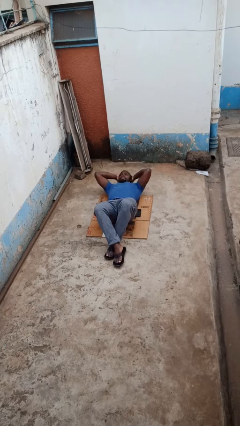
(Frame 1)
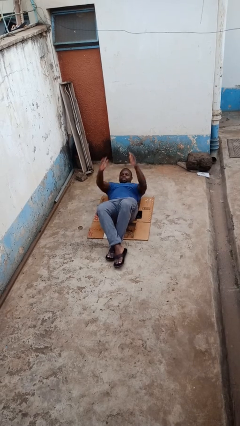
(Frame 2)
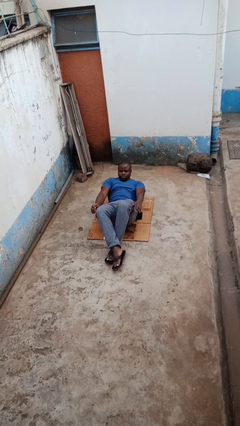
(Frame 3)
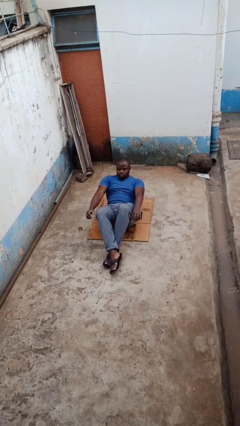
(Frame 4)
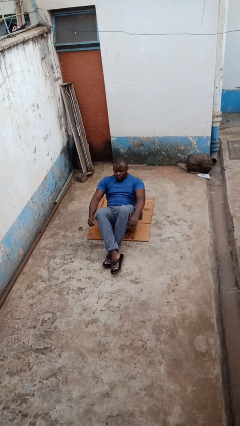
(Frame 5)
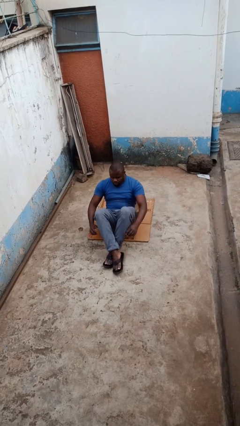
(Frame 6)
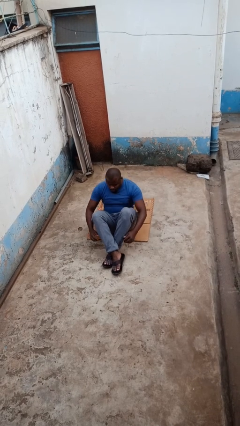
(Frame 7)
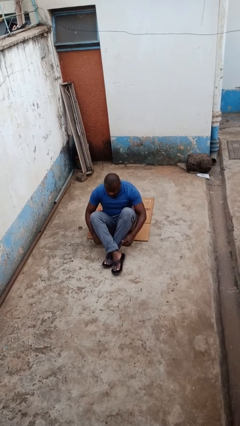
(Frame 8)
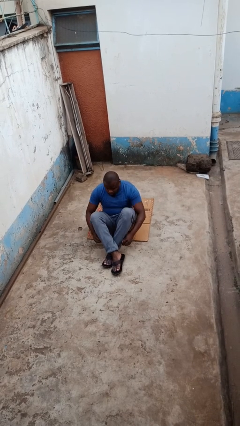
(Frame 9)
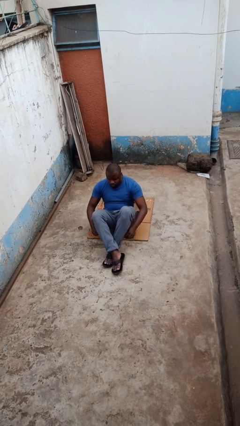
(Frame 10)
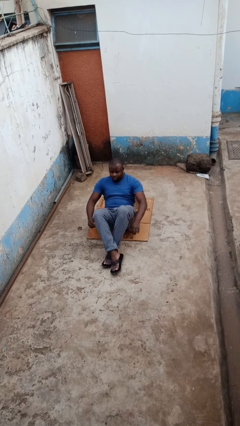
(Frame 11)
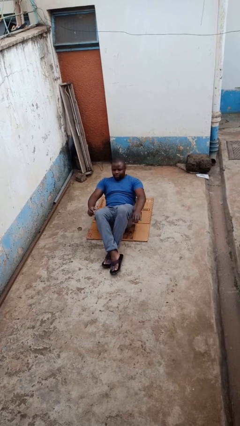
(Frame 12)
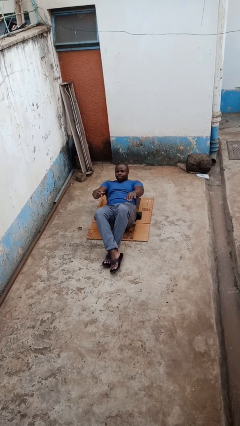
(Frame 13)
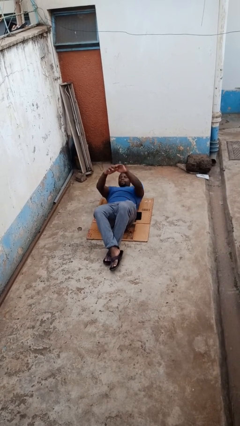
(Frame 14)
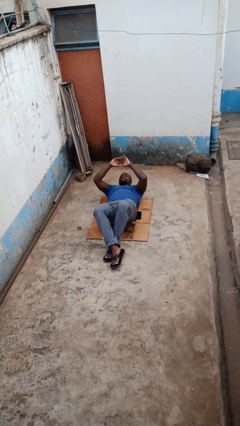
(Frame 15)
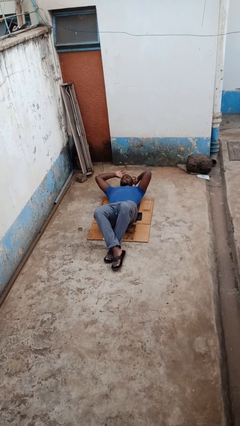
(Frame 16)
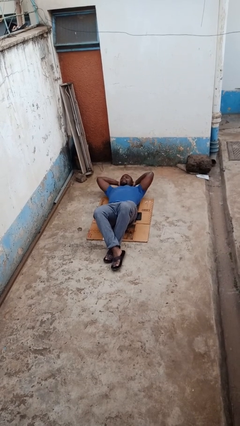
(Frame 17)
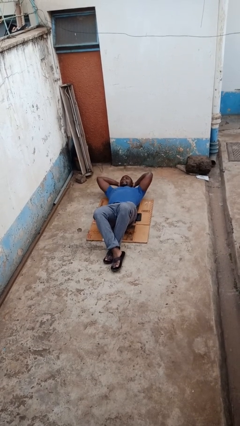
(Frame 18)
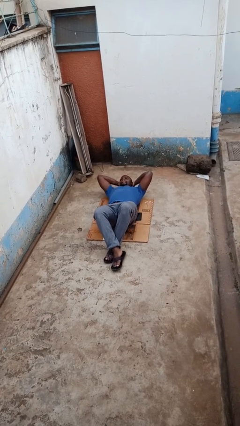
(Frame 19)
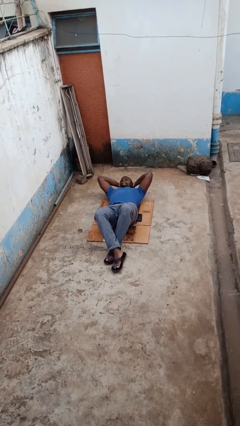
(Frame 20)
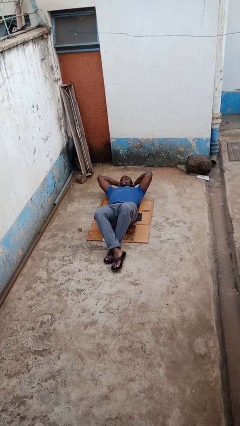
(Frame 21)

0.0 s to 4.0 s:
person exercises with situp

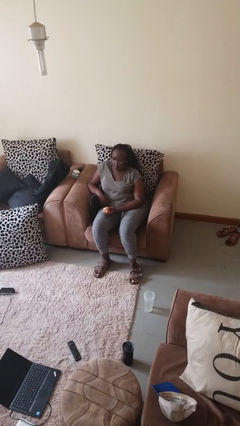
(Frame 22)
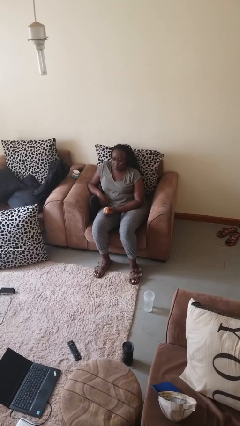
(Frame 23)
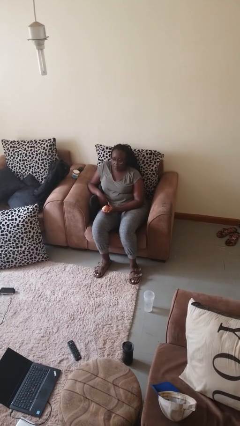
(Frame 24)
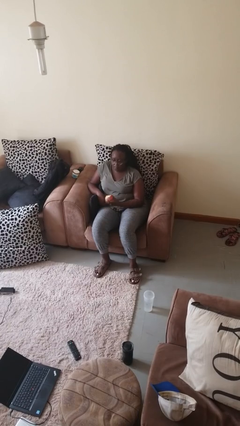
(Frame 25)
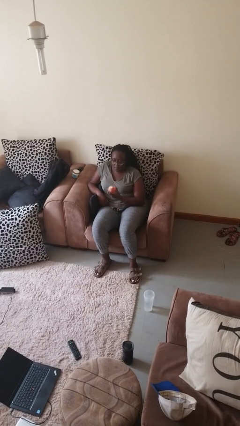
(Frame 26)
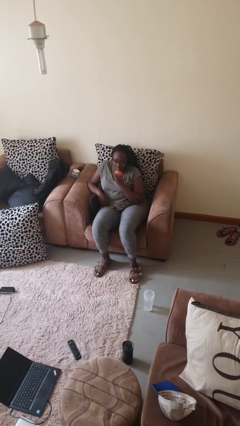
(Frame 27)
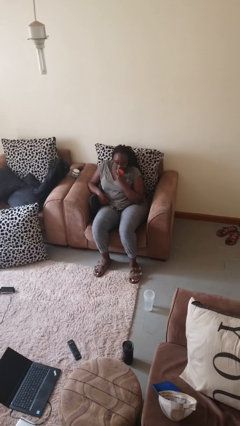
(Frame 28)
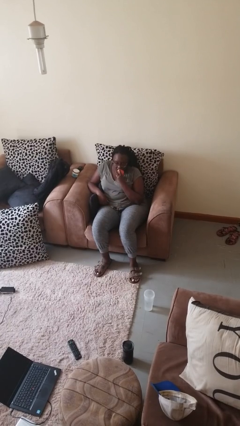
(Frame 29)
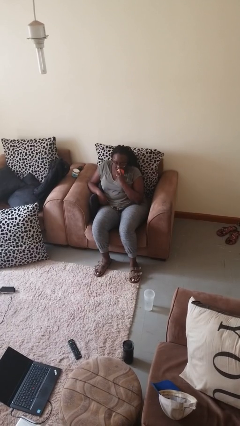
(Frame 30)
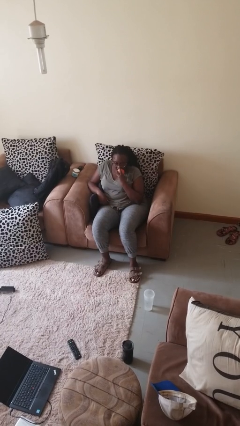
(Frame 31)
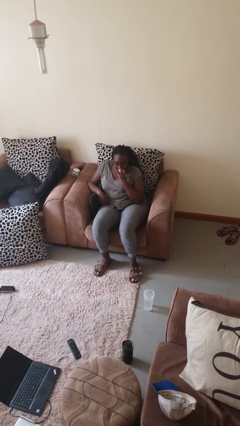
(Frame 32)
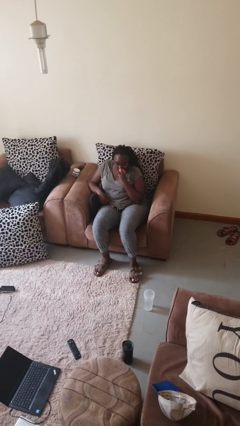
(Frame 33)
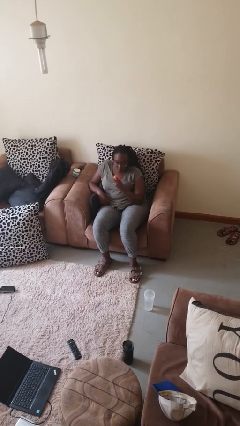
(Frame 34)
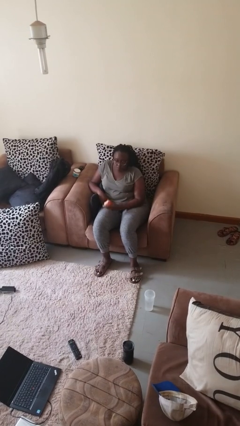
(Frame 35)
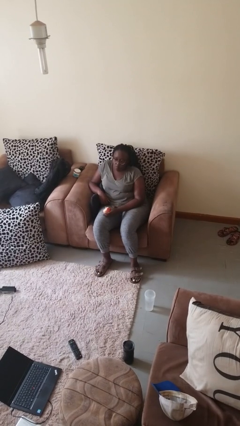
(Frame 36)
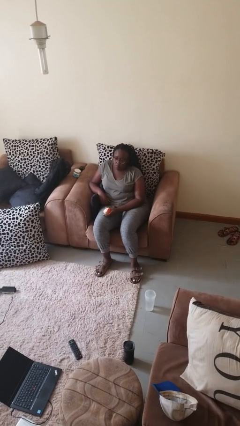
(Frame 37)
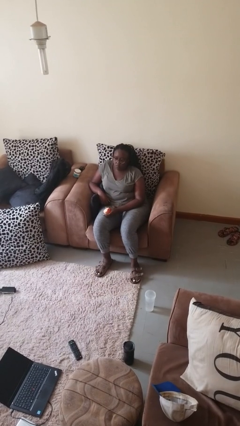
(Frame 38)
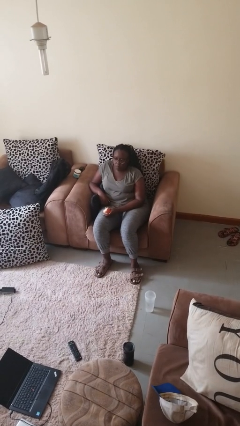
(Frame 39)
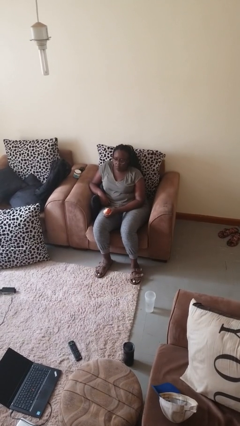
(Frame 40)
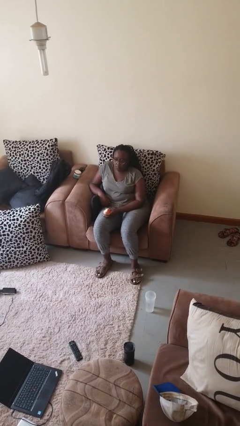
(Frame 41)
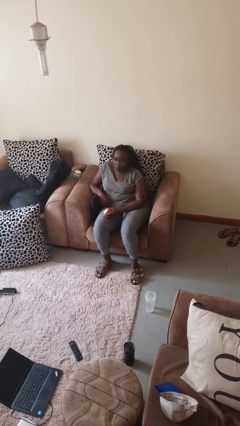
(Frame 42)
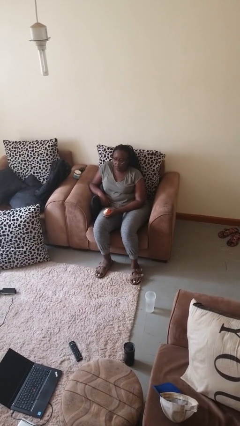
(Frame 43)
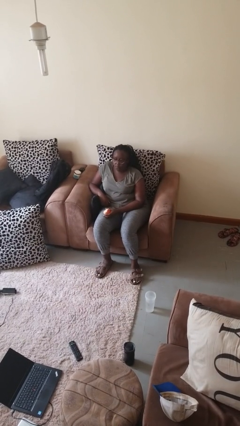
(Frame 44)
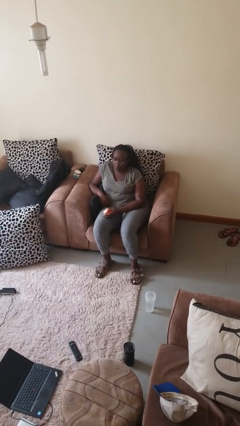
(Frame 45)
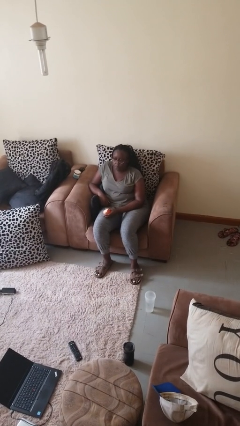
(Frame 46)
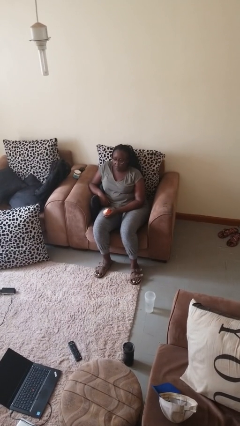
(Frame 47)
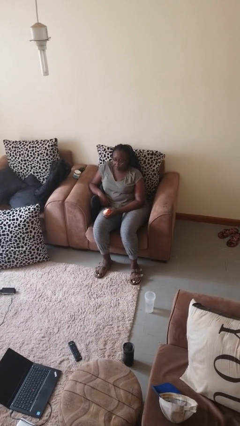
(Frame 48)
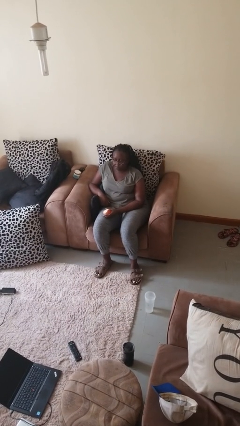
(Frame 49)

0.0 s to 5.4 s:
person eats apple

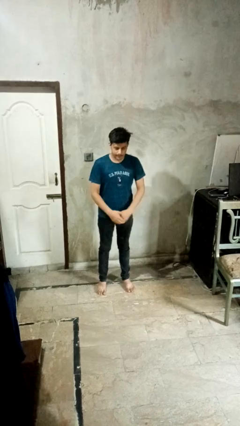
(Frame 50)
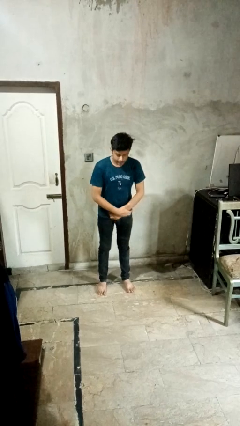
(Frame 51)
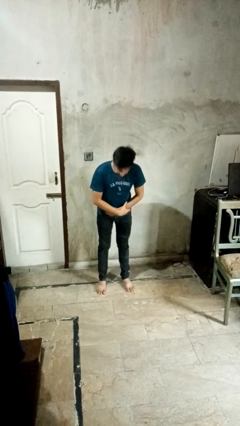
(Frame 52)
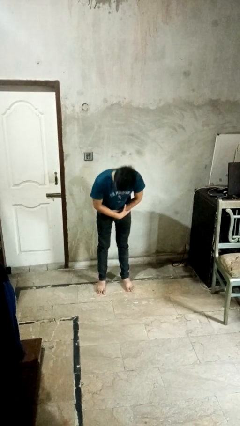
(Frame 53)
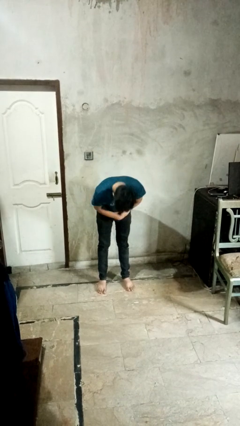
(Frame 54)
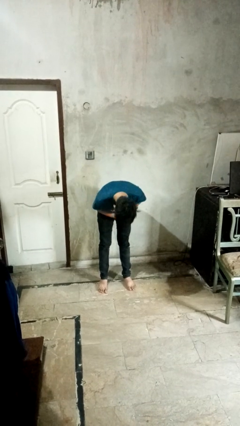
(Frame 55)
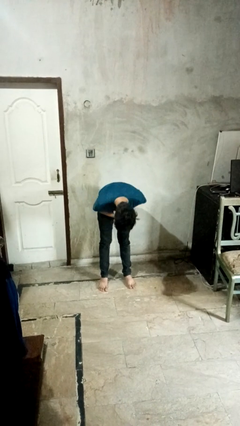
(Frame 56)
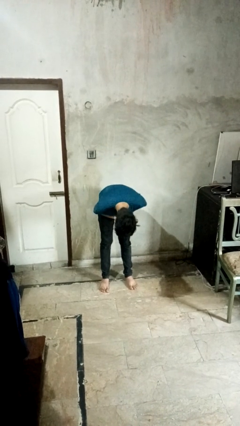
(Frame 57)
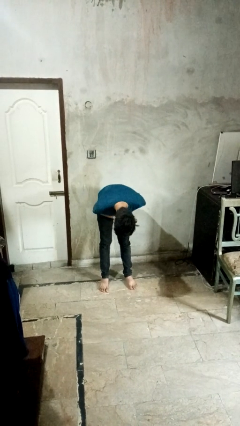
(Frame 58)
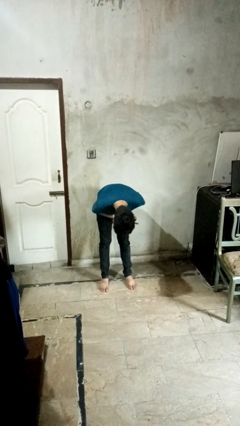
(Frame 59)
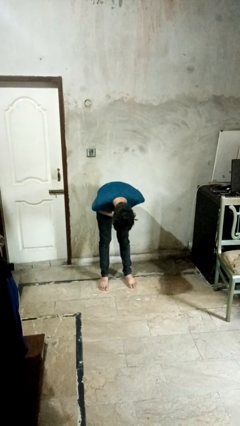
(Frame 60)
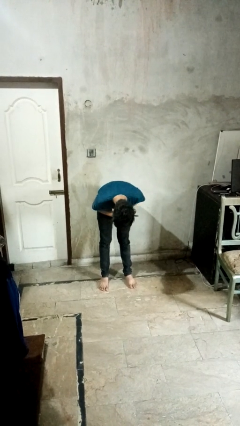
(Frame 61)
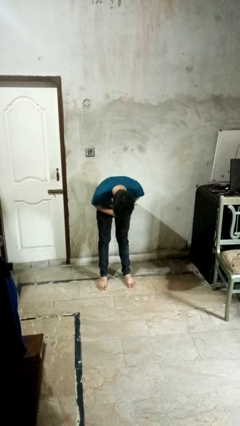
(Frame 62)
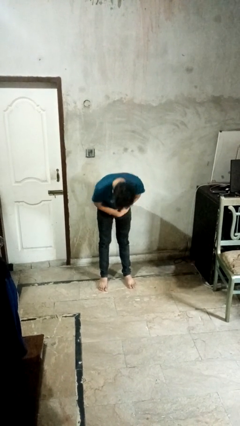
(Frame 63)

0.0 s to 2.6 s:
person bows

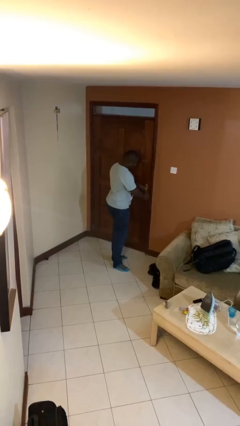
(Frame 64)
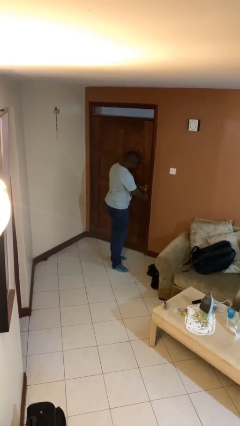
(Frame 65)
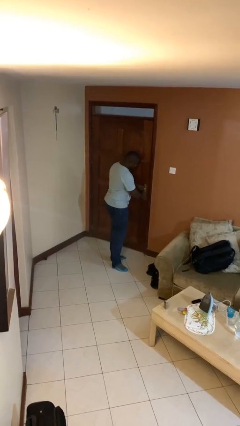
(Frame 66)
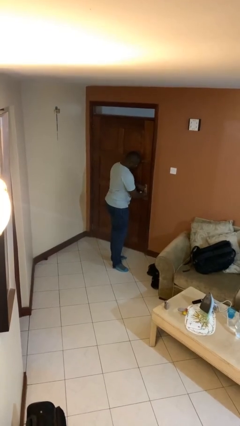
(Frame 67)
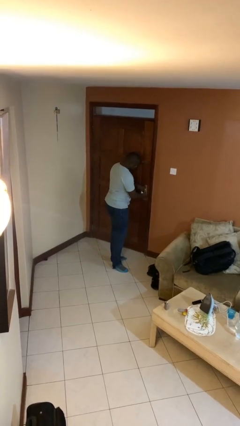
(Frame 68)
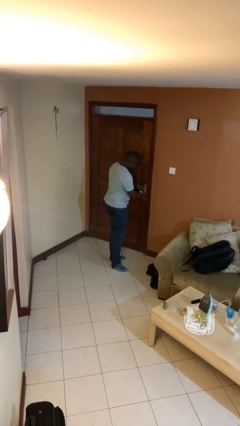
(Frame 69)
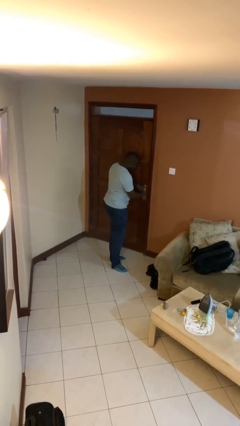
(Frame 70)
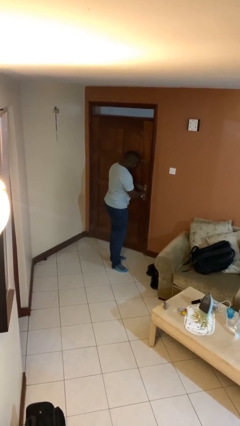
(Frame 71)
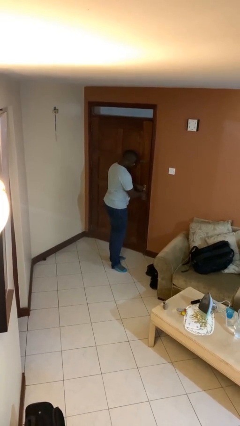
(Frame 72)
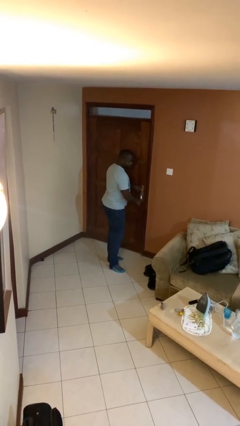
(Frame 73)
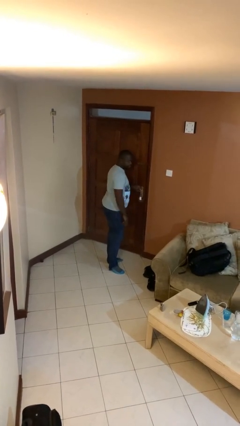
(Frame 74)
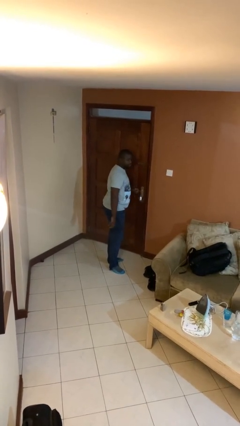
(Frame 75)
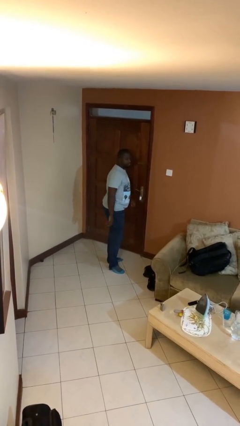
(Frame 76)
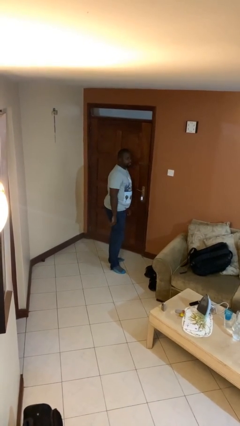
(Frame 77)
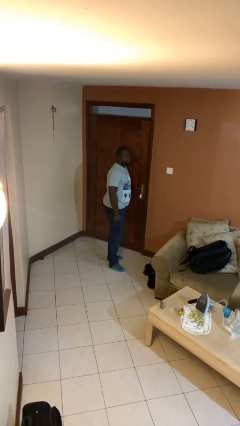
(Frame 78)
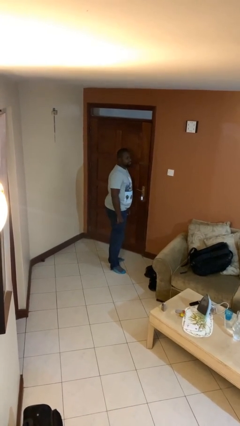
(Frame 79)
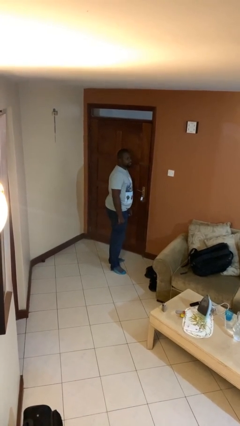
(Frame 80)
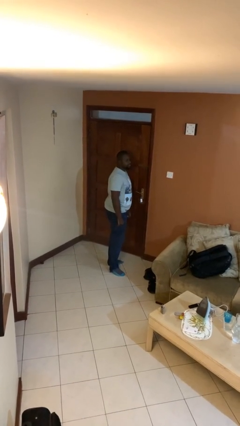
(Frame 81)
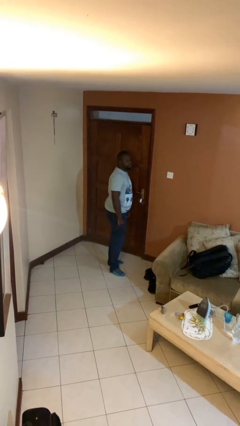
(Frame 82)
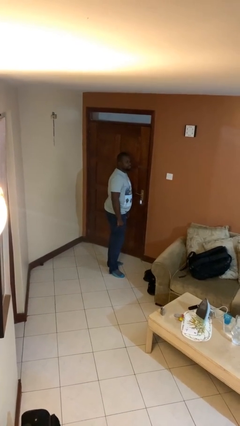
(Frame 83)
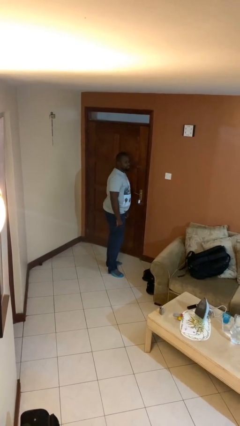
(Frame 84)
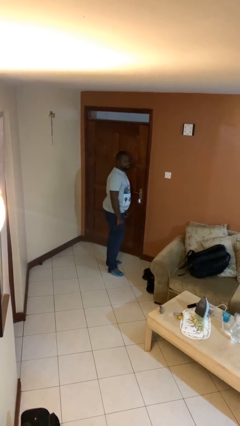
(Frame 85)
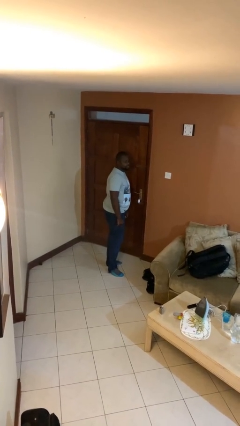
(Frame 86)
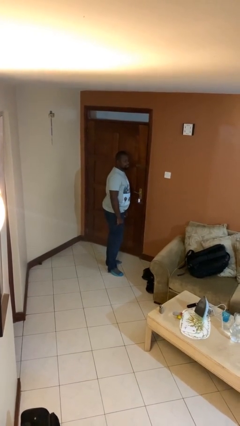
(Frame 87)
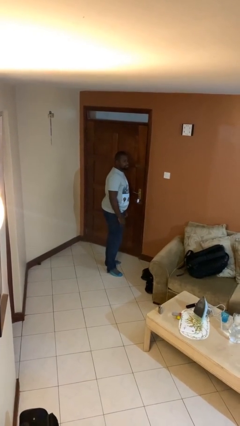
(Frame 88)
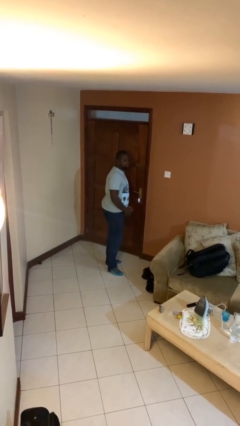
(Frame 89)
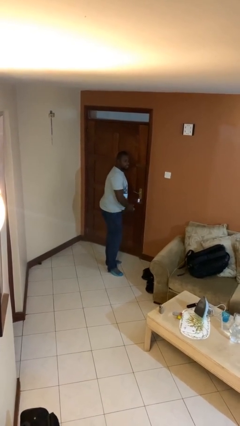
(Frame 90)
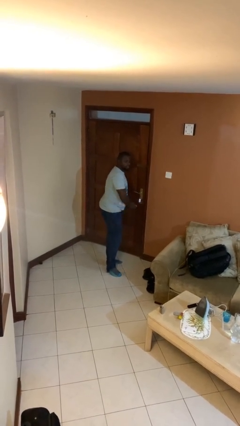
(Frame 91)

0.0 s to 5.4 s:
person locks door with keys
